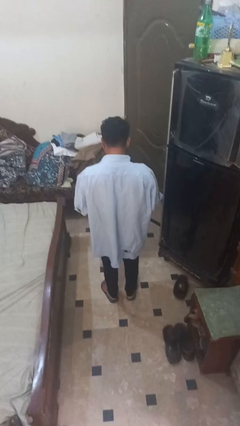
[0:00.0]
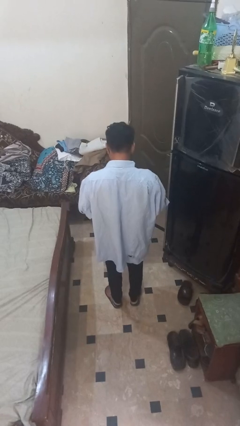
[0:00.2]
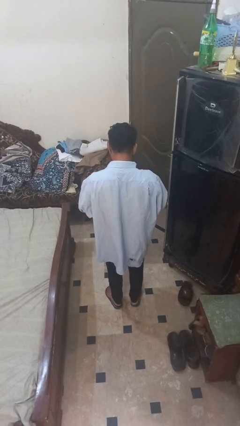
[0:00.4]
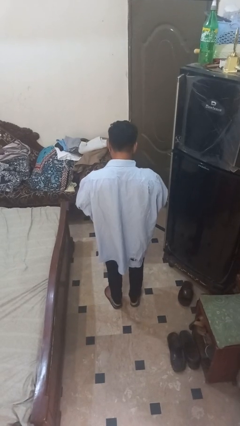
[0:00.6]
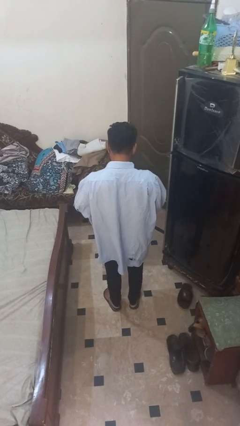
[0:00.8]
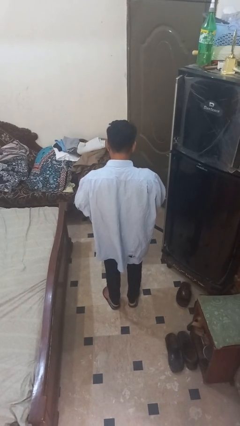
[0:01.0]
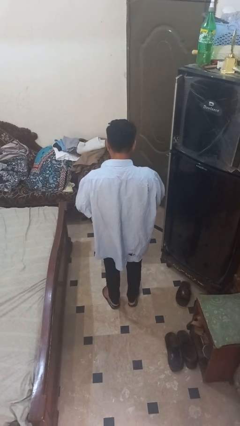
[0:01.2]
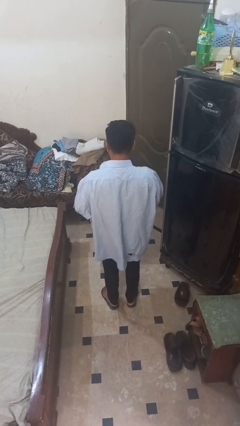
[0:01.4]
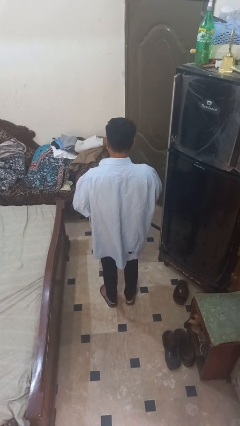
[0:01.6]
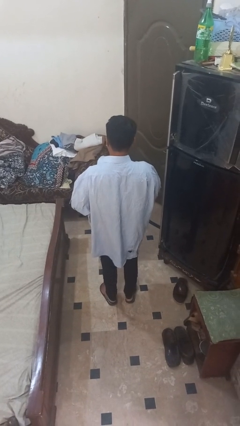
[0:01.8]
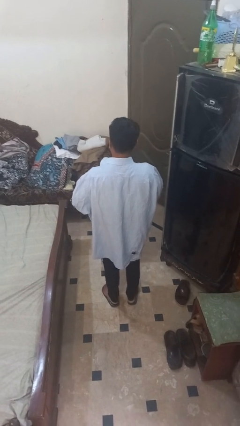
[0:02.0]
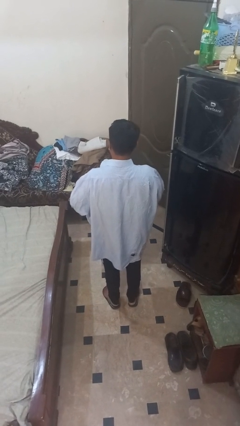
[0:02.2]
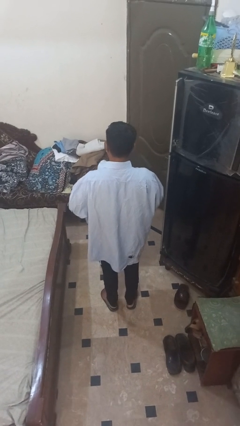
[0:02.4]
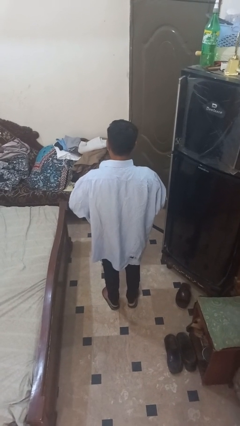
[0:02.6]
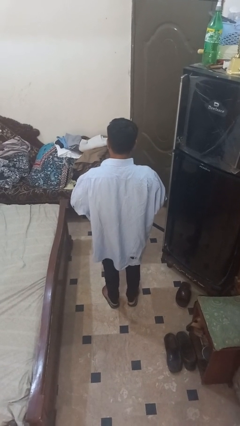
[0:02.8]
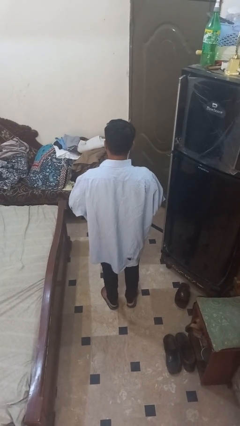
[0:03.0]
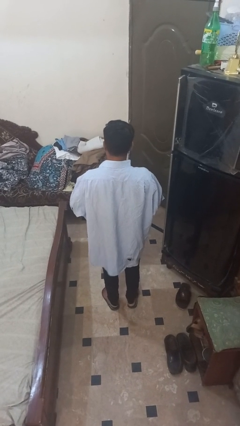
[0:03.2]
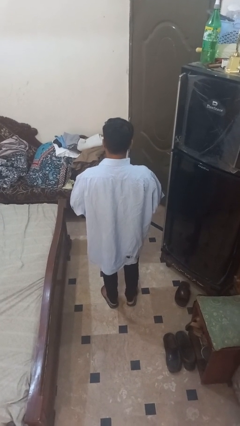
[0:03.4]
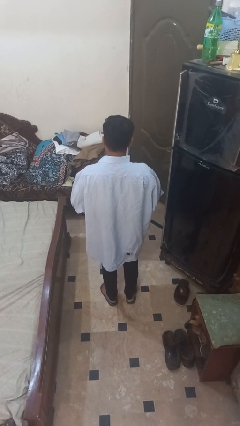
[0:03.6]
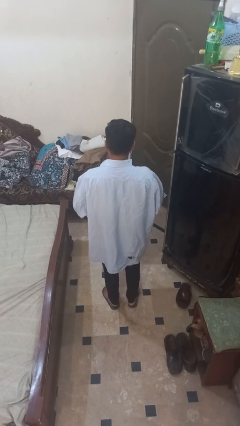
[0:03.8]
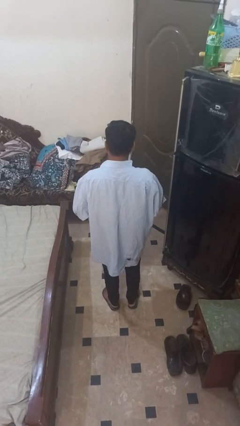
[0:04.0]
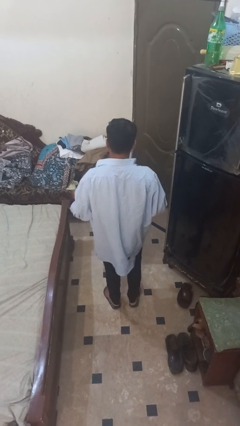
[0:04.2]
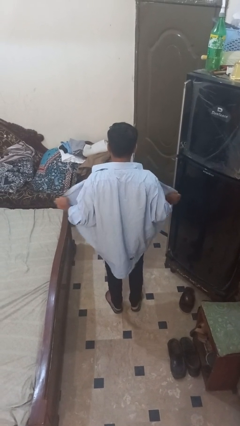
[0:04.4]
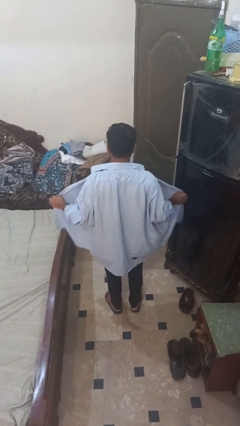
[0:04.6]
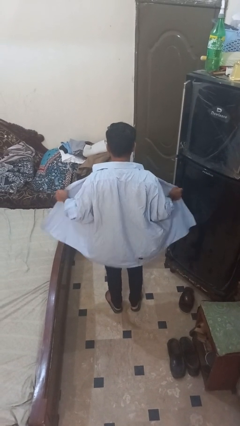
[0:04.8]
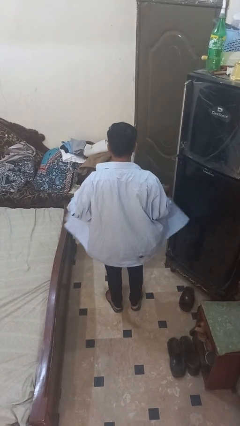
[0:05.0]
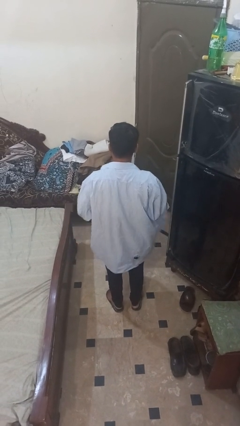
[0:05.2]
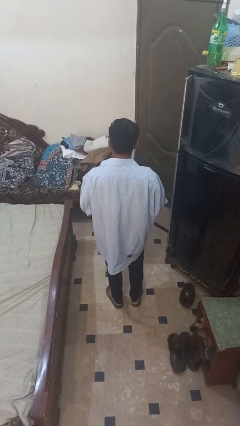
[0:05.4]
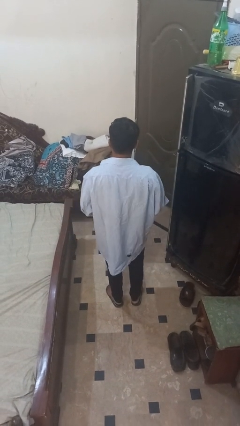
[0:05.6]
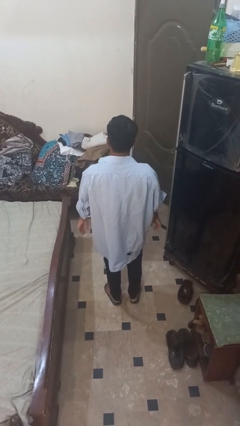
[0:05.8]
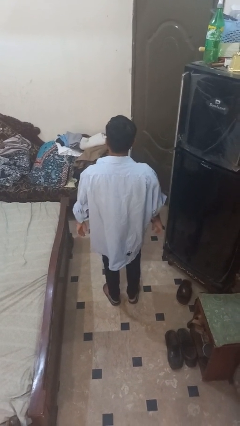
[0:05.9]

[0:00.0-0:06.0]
person unbuttons shirt

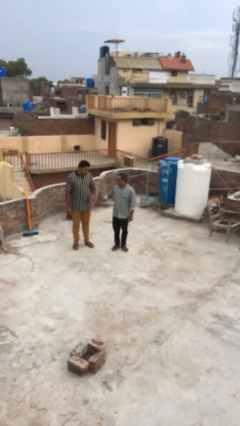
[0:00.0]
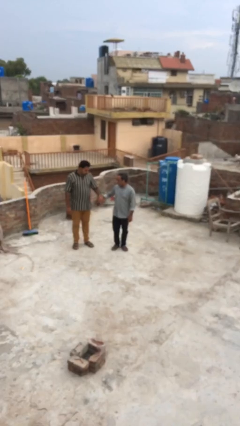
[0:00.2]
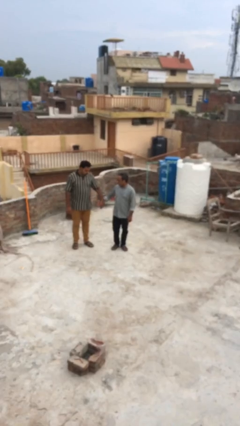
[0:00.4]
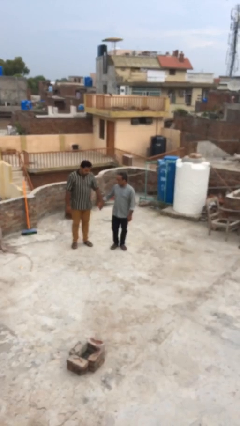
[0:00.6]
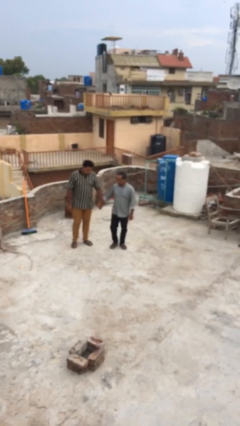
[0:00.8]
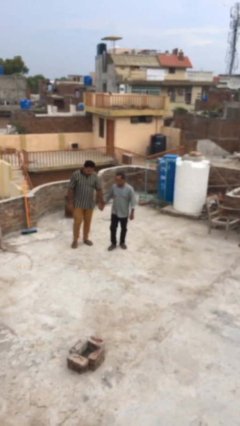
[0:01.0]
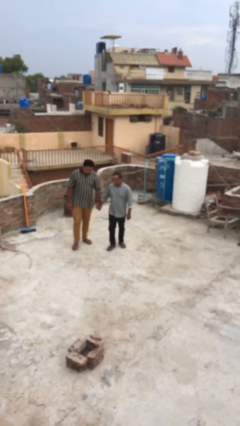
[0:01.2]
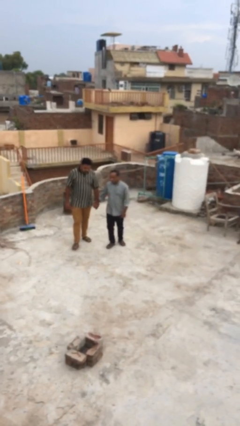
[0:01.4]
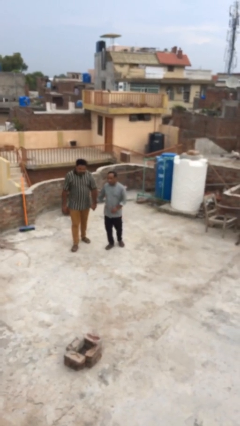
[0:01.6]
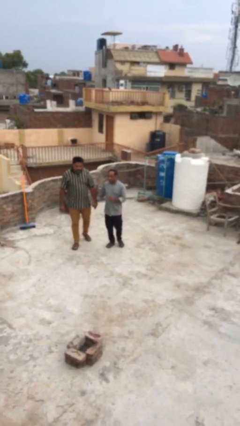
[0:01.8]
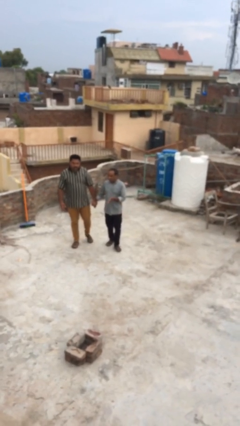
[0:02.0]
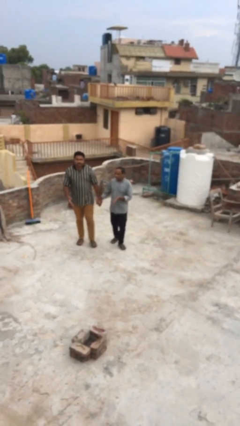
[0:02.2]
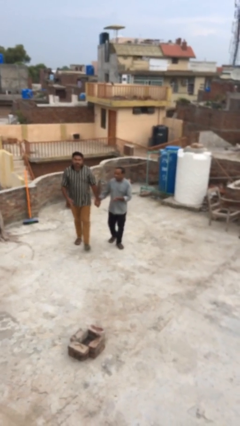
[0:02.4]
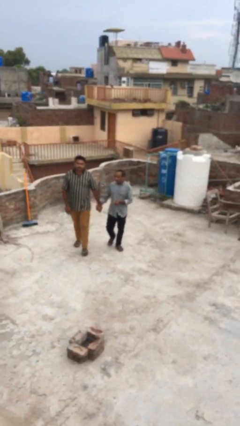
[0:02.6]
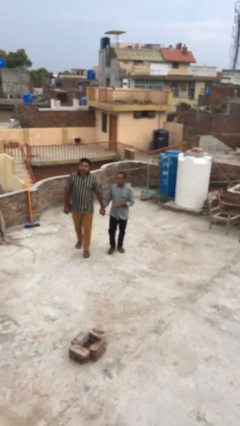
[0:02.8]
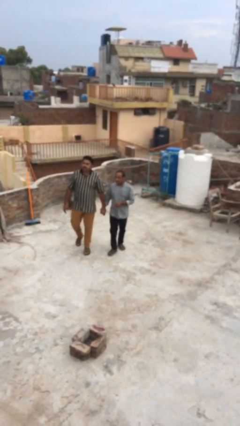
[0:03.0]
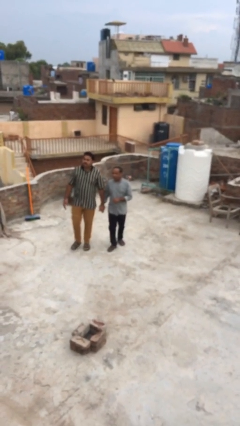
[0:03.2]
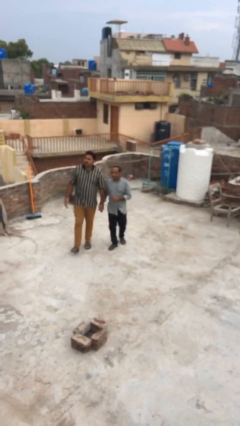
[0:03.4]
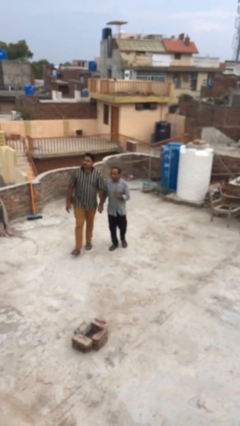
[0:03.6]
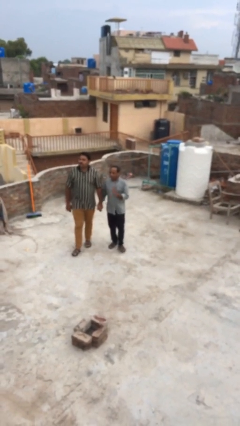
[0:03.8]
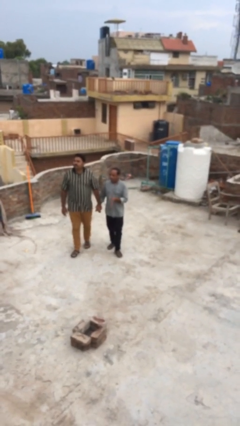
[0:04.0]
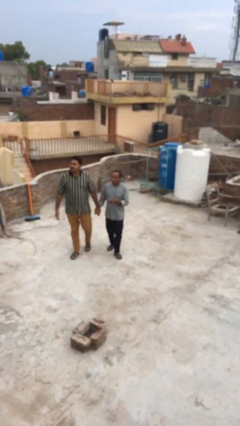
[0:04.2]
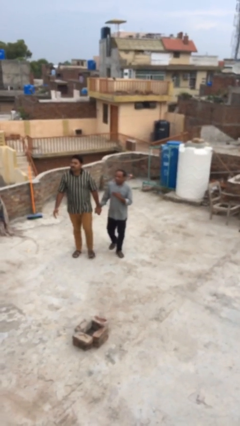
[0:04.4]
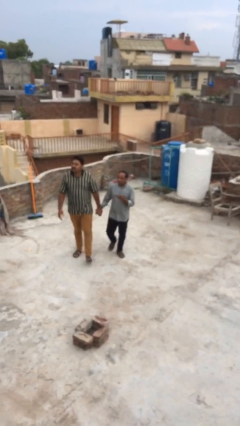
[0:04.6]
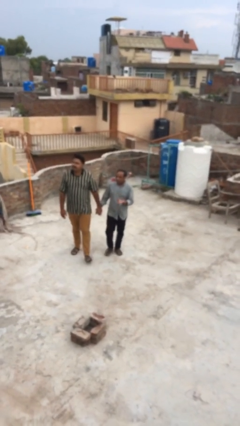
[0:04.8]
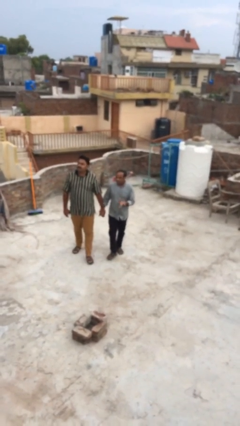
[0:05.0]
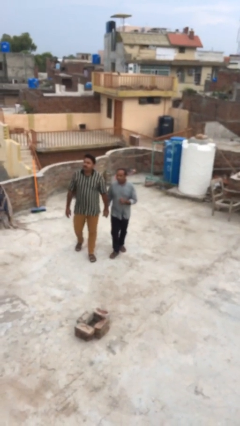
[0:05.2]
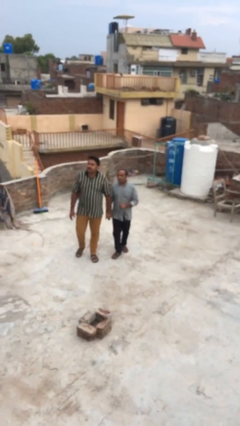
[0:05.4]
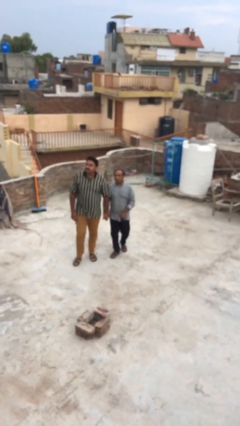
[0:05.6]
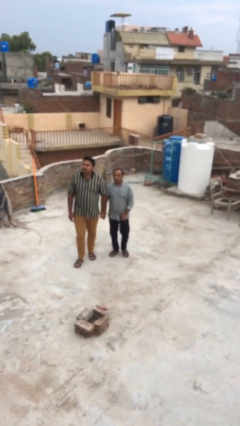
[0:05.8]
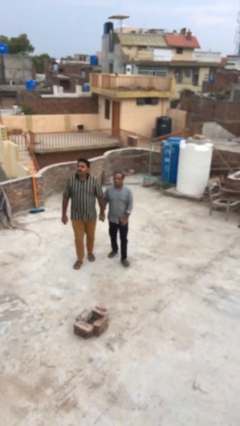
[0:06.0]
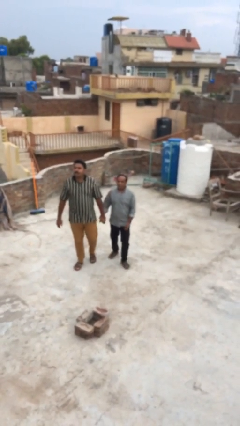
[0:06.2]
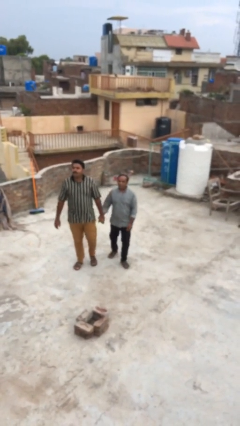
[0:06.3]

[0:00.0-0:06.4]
person holds hand

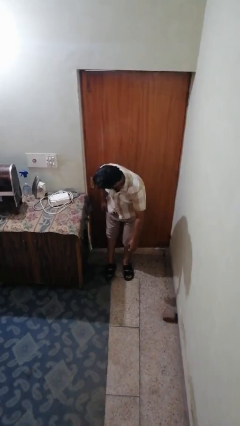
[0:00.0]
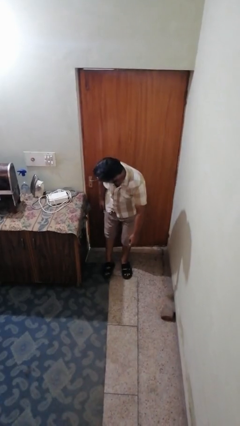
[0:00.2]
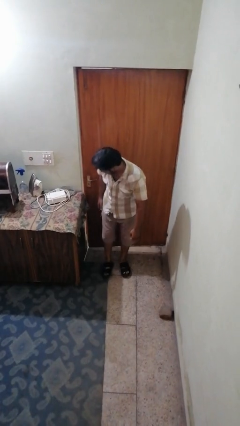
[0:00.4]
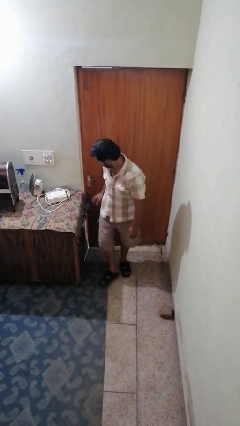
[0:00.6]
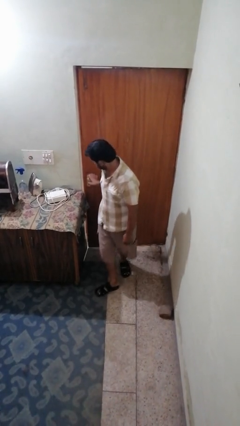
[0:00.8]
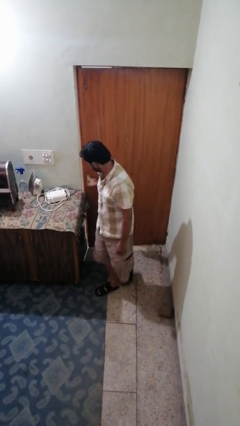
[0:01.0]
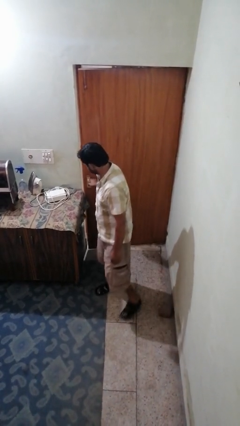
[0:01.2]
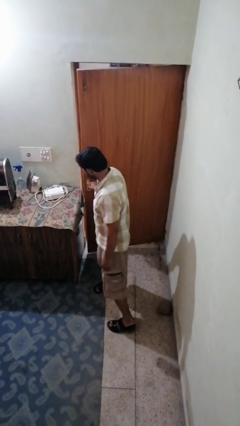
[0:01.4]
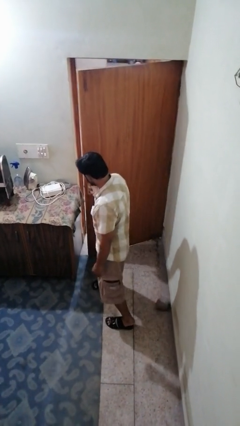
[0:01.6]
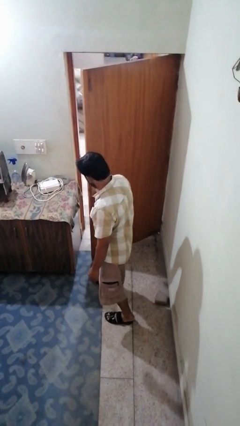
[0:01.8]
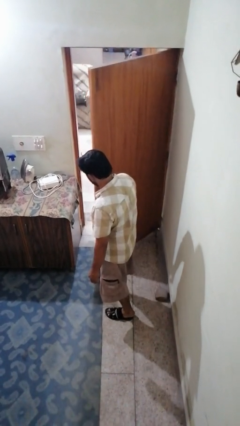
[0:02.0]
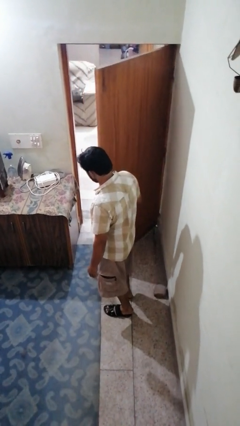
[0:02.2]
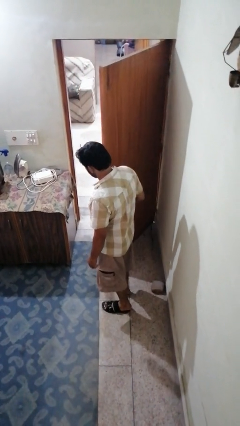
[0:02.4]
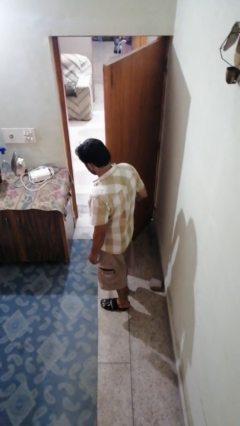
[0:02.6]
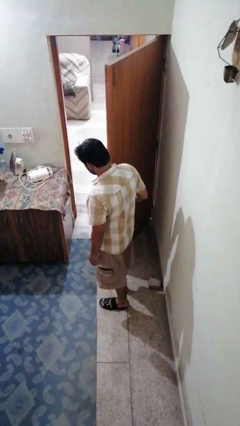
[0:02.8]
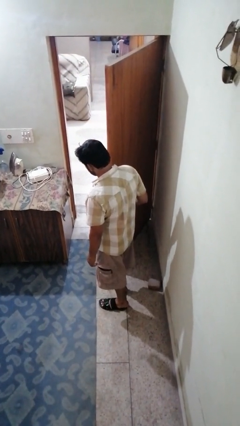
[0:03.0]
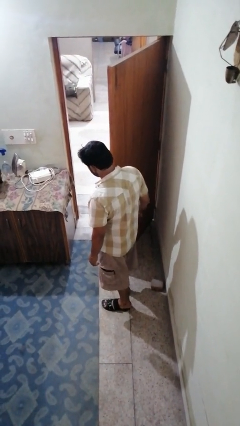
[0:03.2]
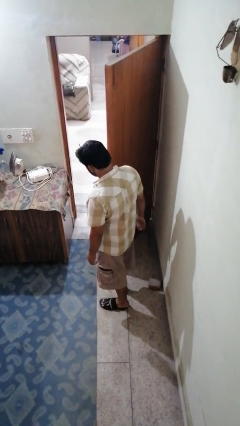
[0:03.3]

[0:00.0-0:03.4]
person opens facility door

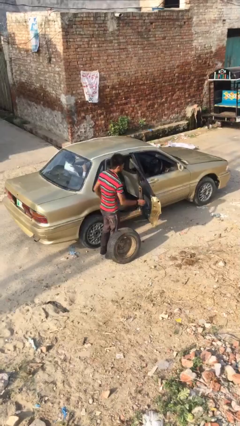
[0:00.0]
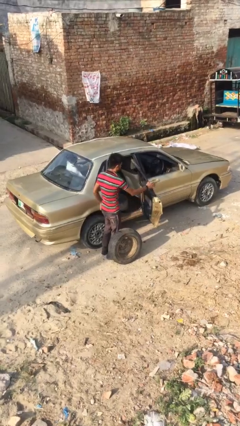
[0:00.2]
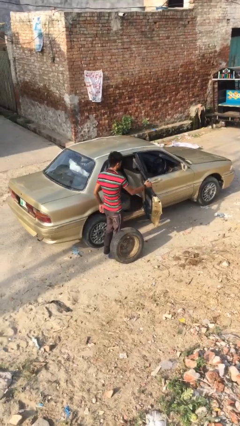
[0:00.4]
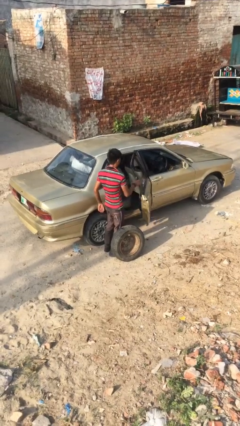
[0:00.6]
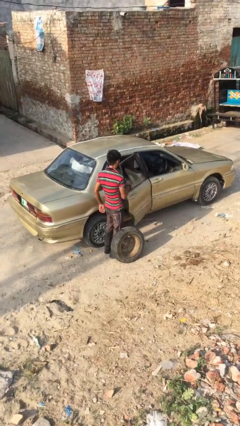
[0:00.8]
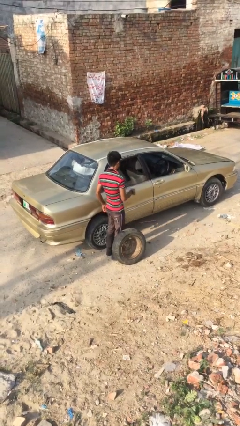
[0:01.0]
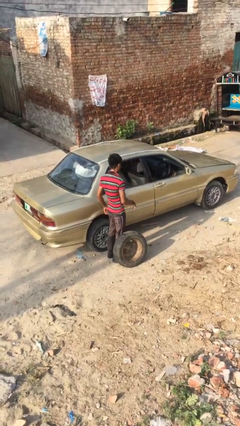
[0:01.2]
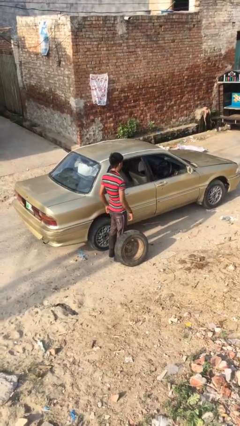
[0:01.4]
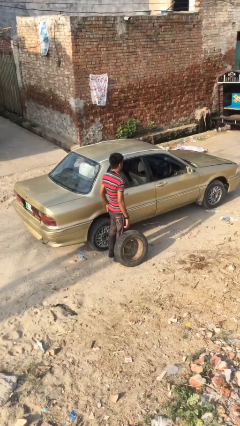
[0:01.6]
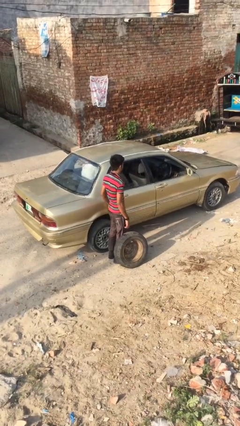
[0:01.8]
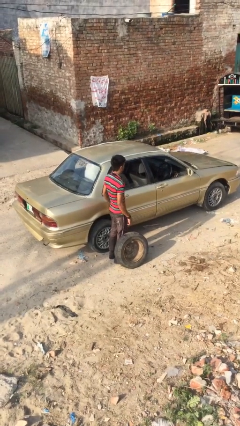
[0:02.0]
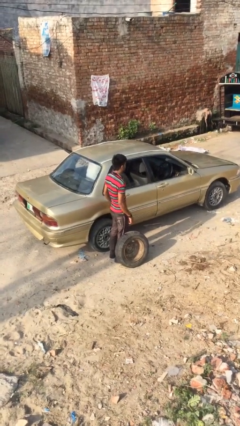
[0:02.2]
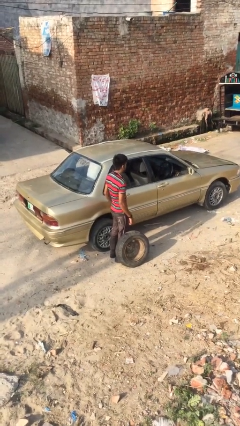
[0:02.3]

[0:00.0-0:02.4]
person closes car door
